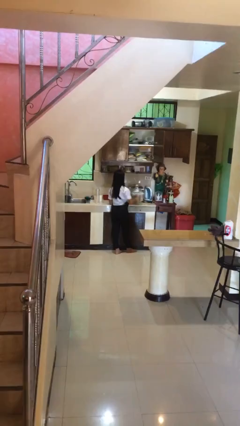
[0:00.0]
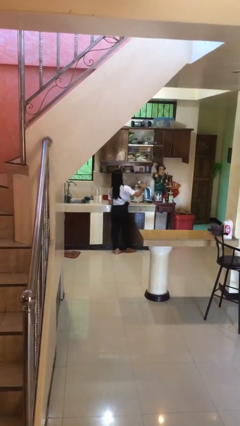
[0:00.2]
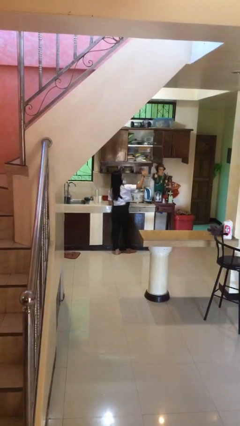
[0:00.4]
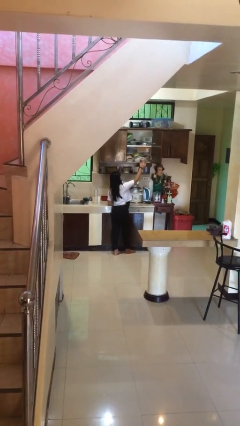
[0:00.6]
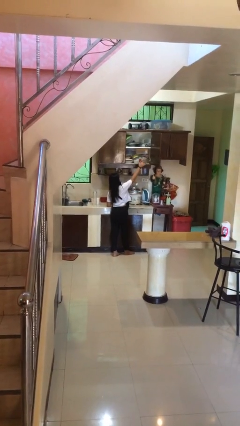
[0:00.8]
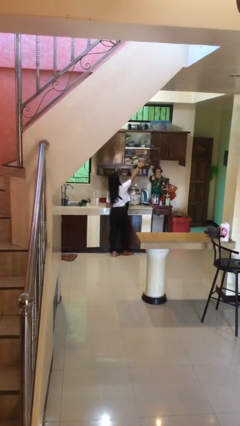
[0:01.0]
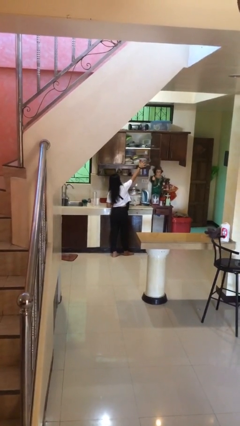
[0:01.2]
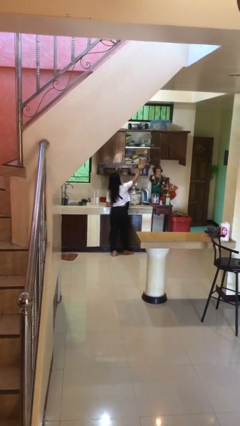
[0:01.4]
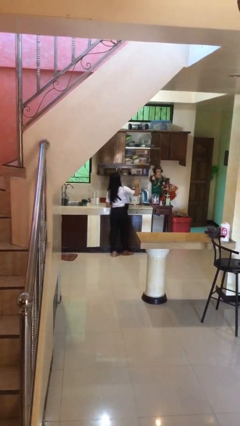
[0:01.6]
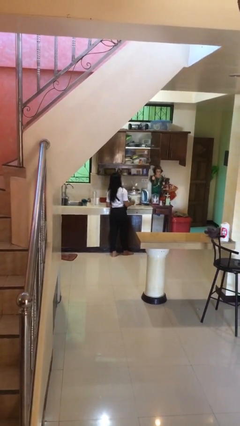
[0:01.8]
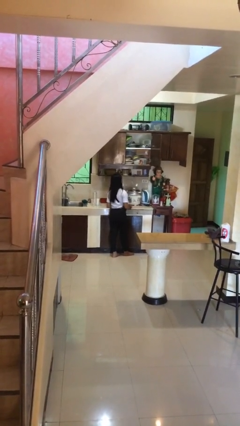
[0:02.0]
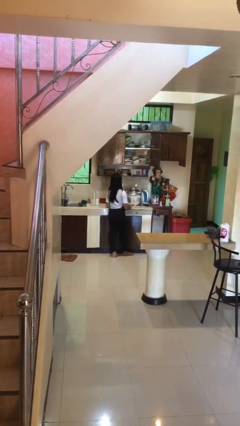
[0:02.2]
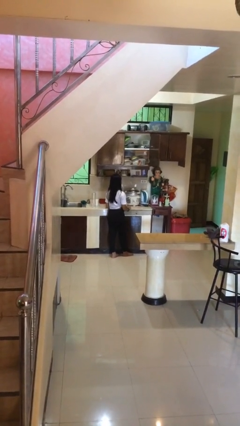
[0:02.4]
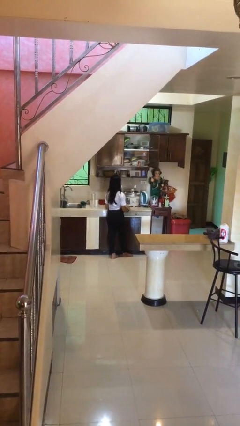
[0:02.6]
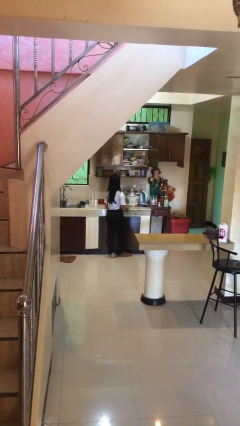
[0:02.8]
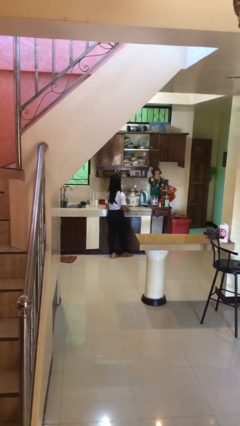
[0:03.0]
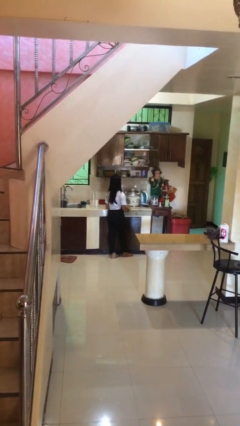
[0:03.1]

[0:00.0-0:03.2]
person puts down object on shelf

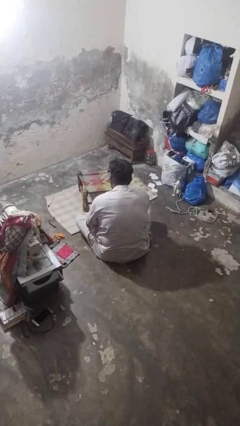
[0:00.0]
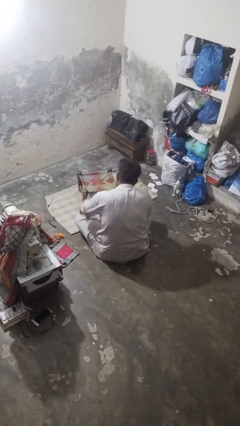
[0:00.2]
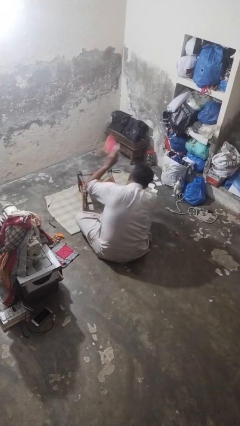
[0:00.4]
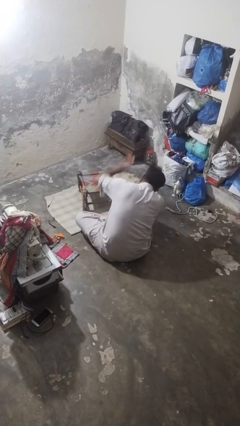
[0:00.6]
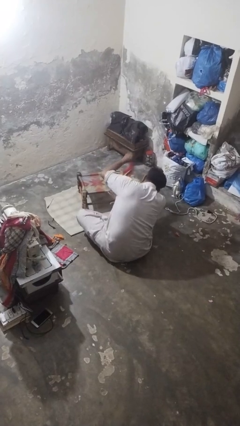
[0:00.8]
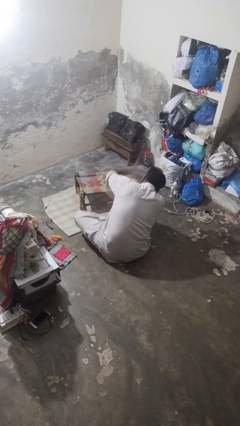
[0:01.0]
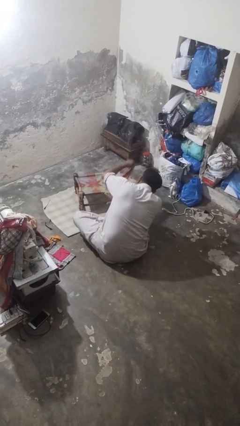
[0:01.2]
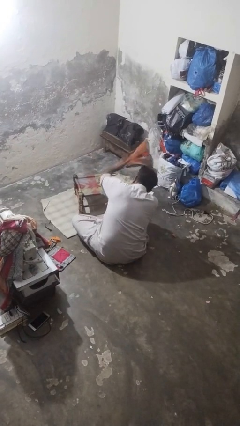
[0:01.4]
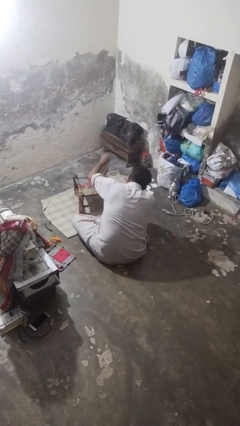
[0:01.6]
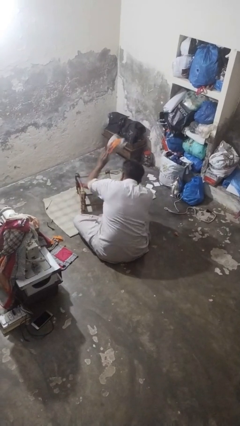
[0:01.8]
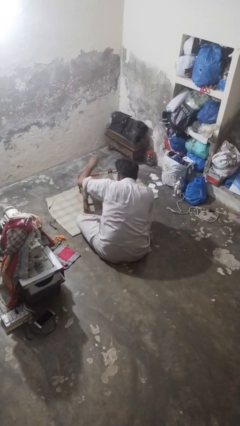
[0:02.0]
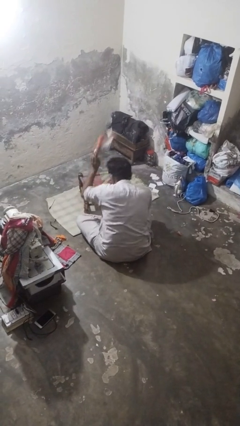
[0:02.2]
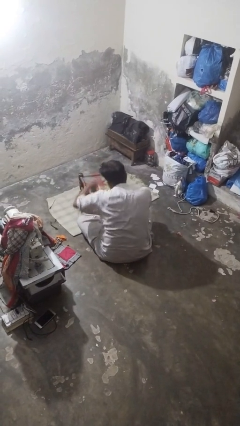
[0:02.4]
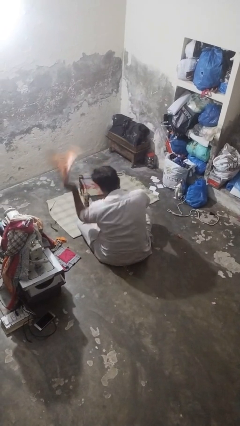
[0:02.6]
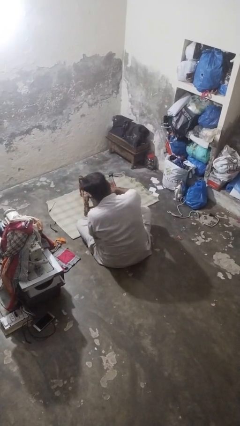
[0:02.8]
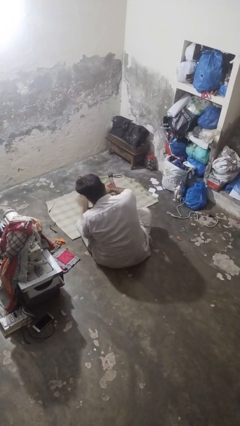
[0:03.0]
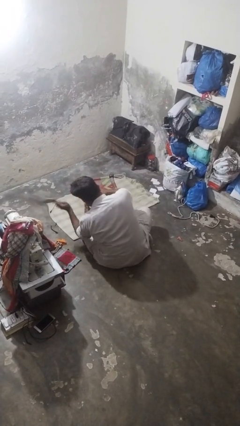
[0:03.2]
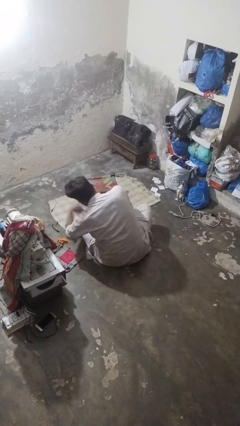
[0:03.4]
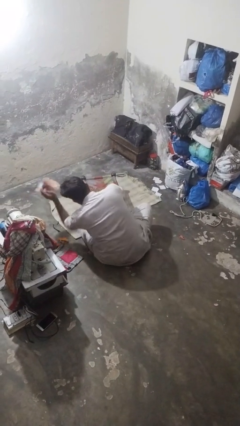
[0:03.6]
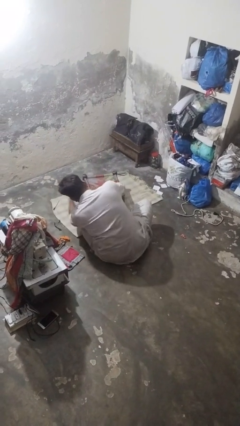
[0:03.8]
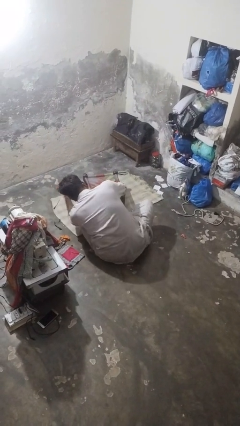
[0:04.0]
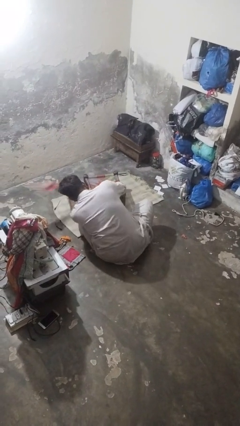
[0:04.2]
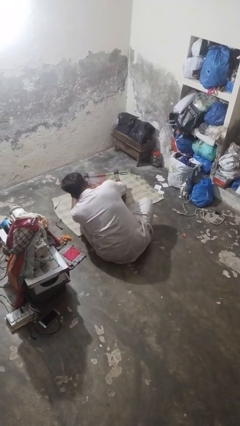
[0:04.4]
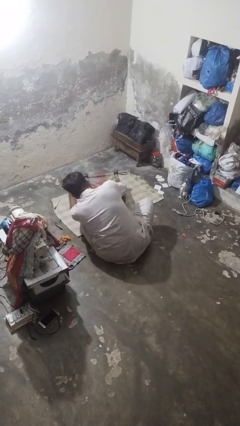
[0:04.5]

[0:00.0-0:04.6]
person dusts furniture

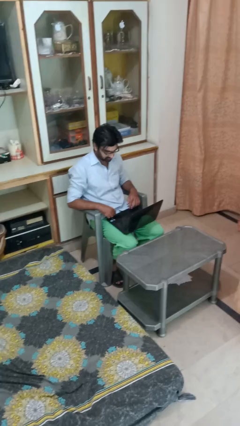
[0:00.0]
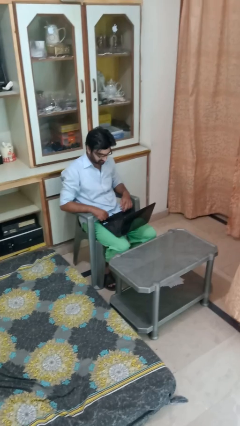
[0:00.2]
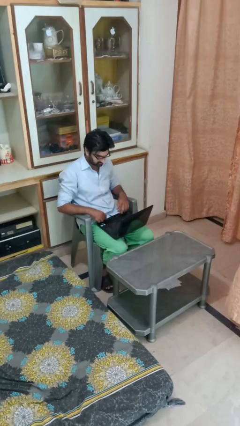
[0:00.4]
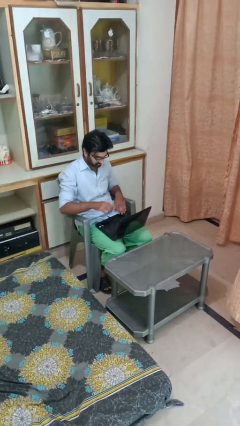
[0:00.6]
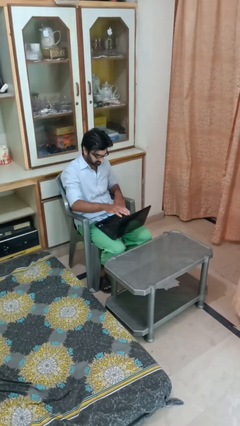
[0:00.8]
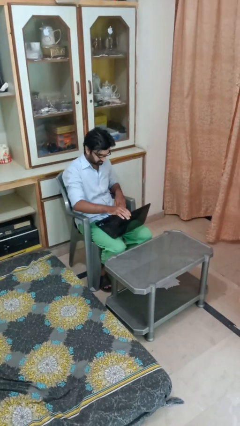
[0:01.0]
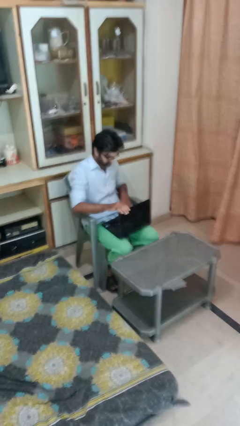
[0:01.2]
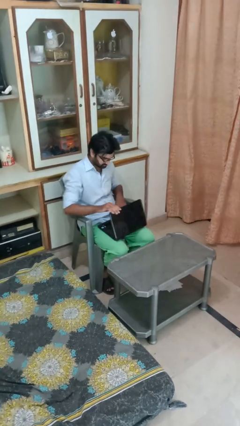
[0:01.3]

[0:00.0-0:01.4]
person closes laptop

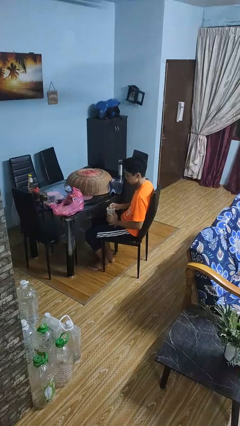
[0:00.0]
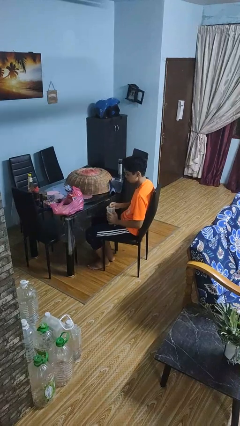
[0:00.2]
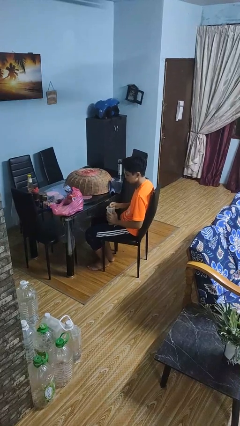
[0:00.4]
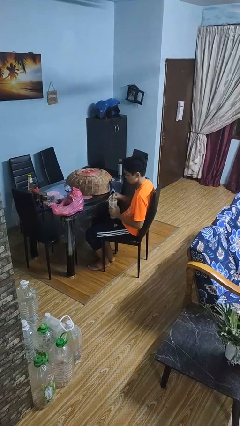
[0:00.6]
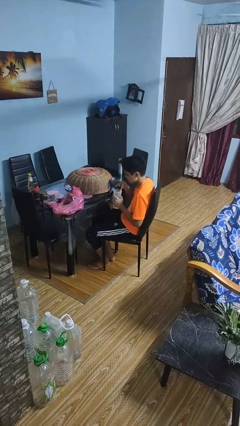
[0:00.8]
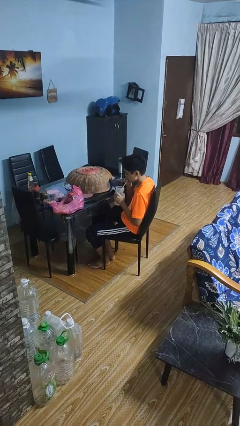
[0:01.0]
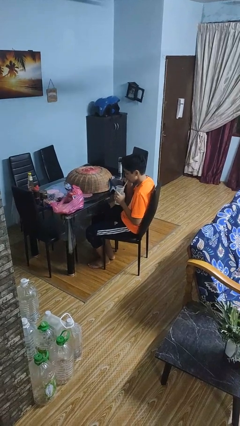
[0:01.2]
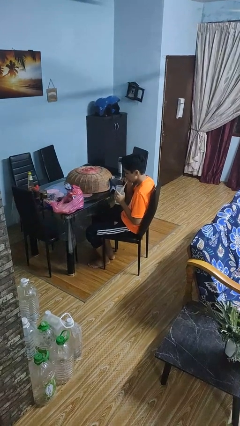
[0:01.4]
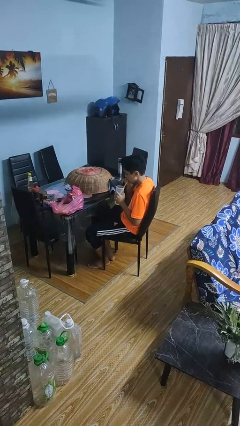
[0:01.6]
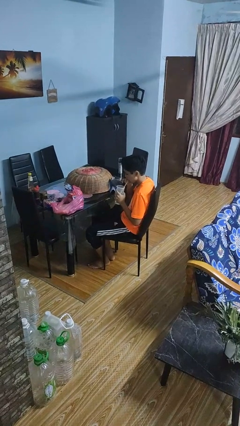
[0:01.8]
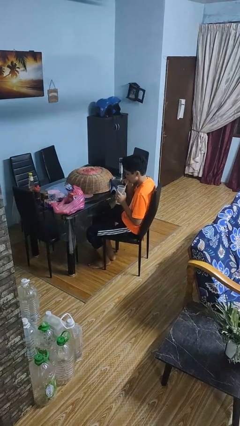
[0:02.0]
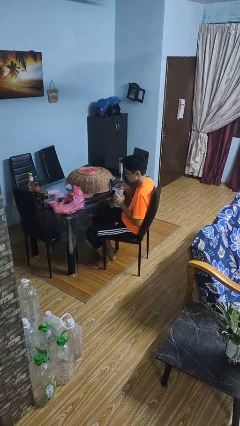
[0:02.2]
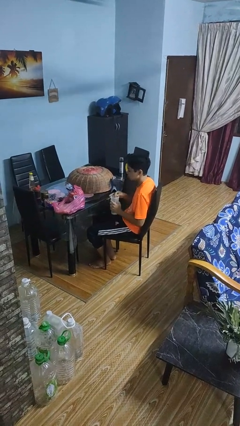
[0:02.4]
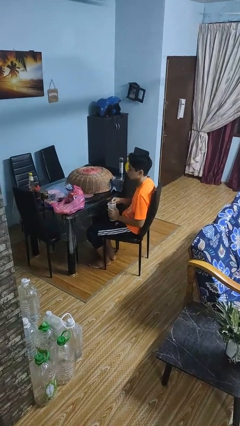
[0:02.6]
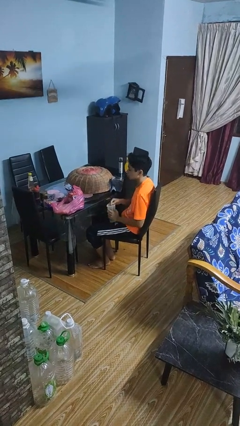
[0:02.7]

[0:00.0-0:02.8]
person drinks from straw

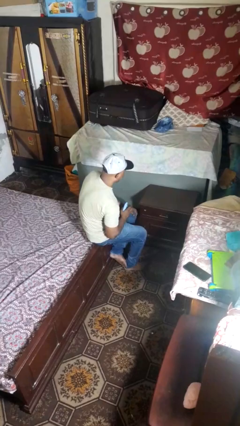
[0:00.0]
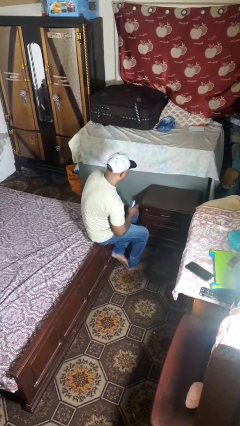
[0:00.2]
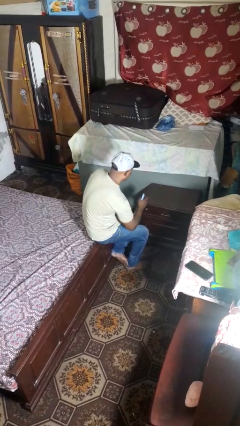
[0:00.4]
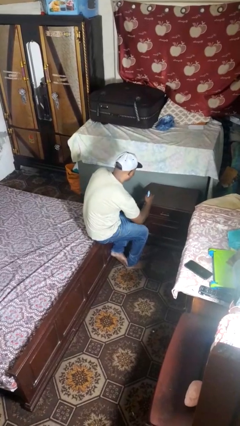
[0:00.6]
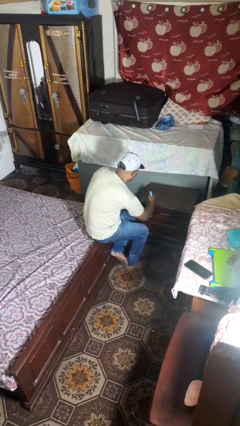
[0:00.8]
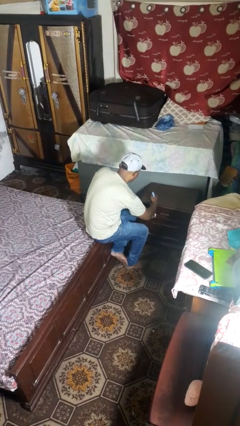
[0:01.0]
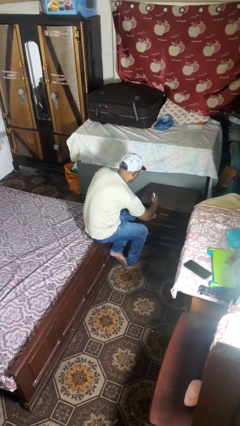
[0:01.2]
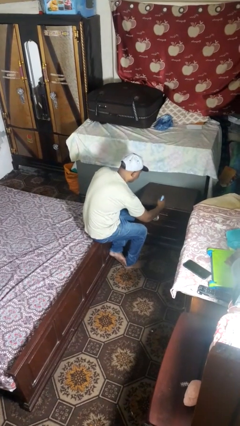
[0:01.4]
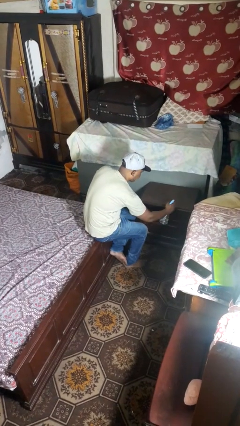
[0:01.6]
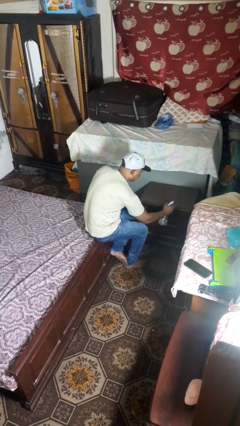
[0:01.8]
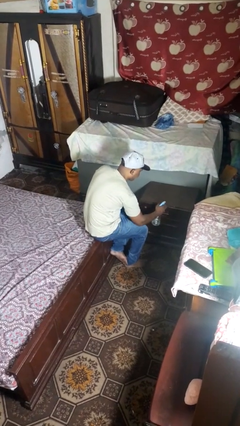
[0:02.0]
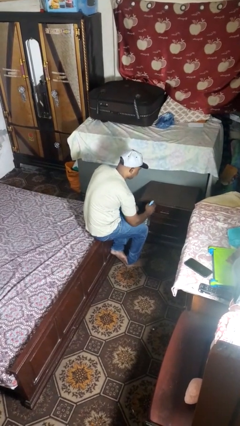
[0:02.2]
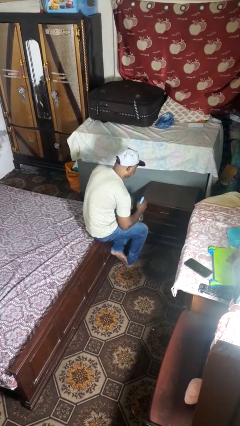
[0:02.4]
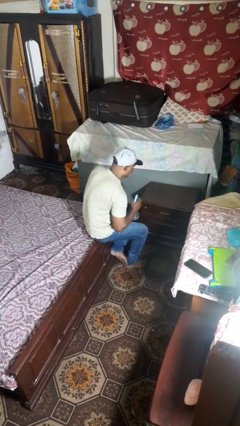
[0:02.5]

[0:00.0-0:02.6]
person sprays from bottle

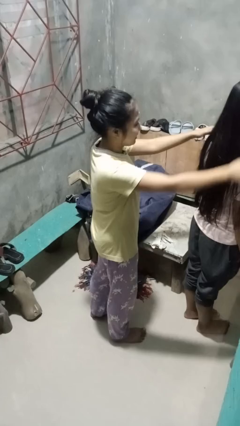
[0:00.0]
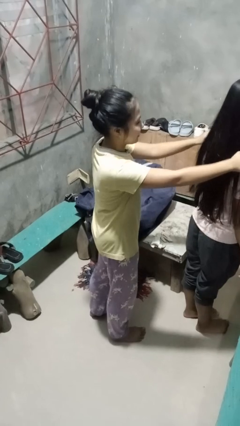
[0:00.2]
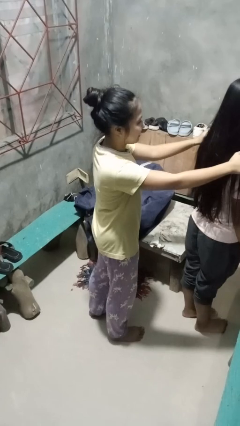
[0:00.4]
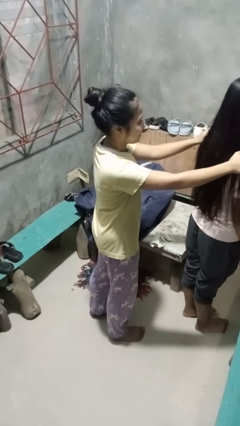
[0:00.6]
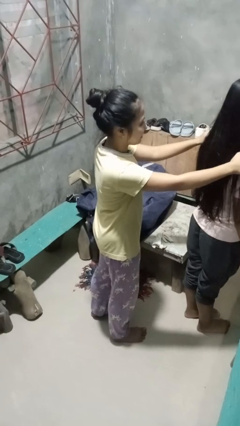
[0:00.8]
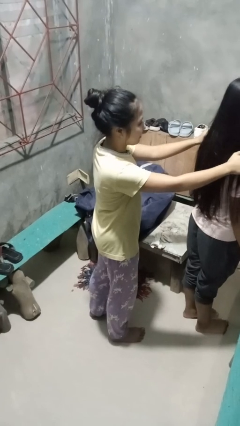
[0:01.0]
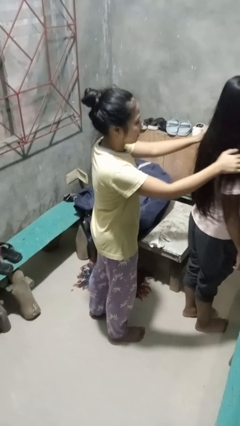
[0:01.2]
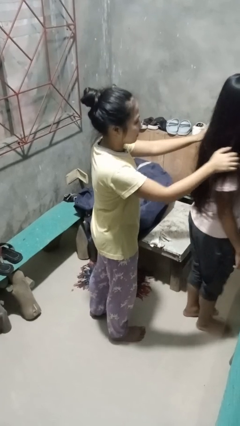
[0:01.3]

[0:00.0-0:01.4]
person grabs person by shoulder

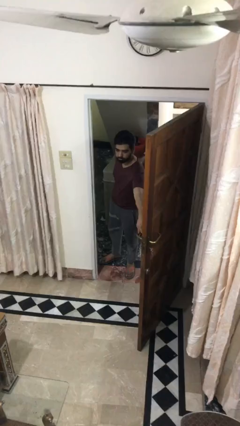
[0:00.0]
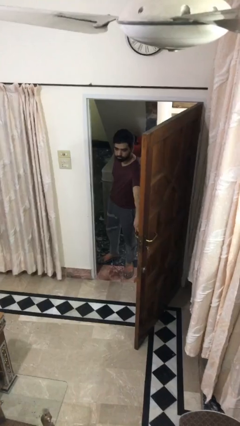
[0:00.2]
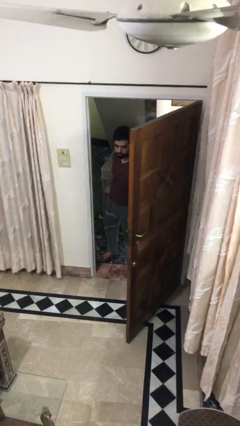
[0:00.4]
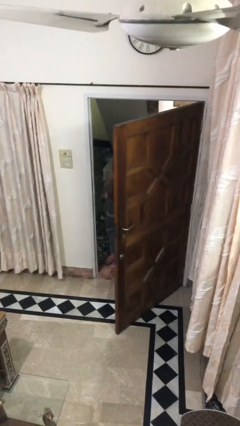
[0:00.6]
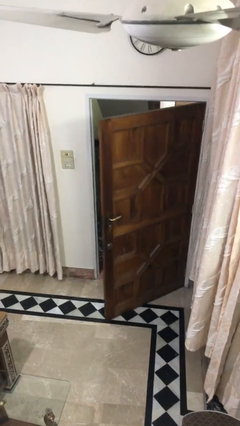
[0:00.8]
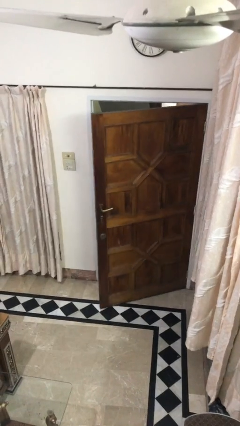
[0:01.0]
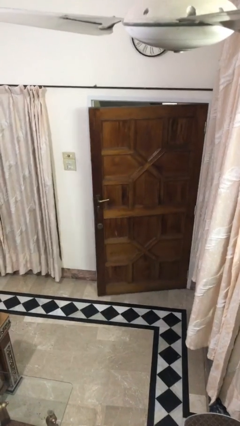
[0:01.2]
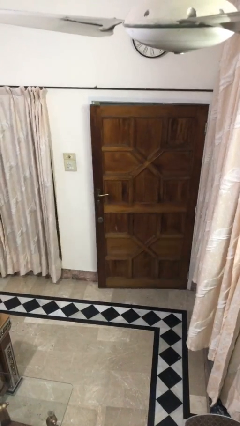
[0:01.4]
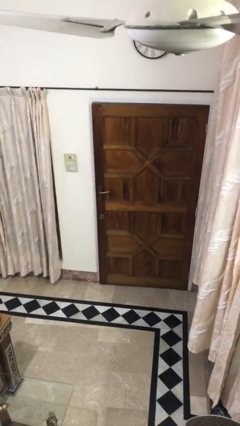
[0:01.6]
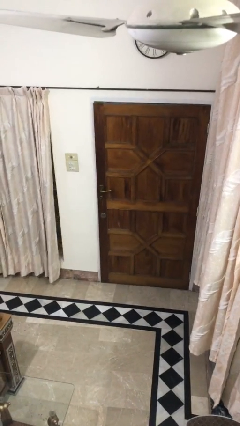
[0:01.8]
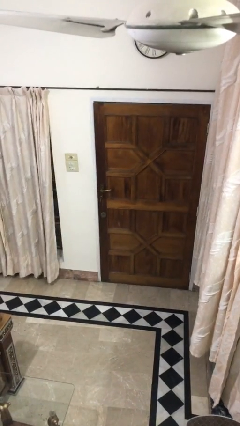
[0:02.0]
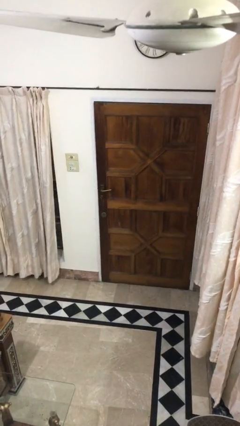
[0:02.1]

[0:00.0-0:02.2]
person closes facility door
